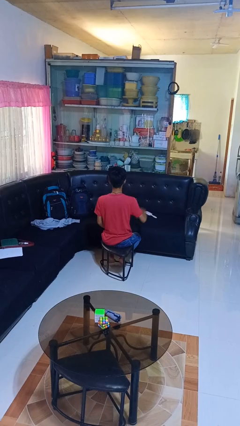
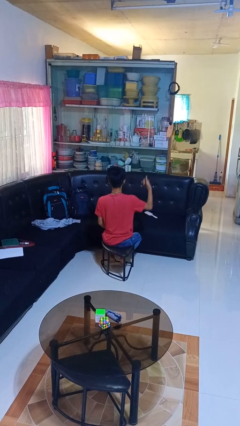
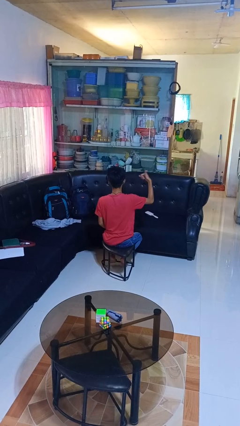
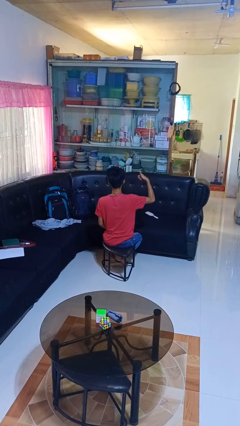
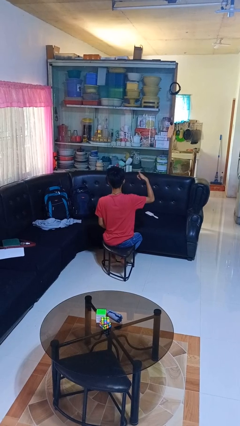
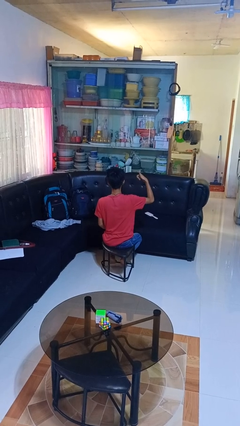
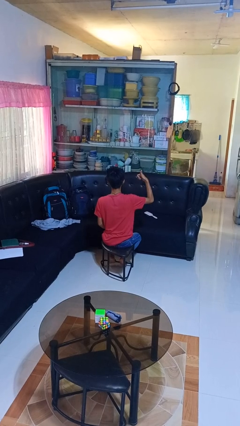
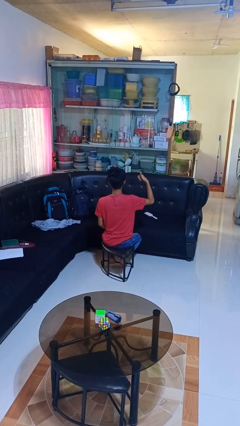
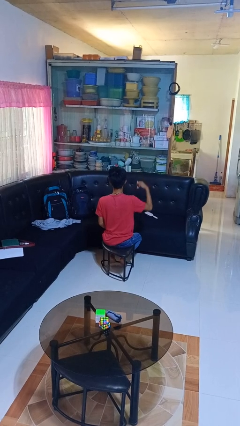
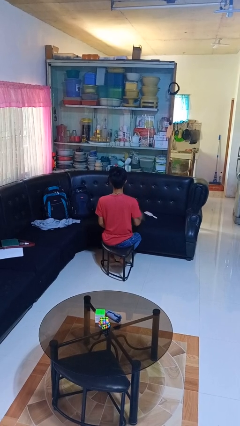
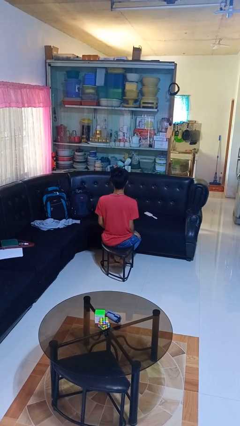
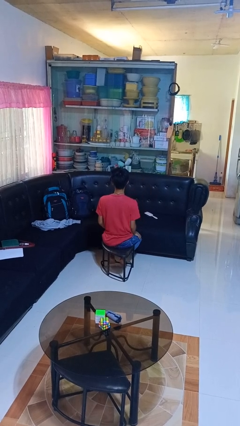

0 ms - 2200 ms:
person gestures hang loose

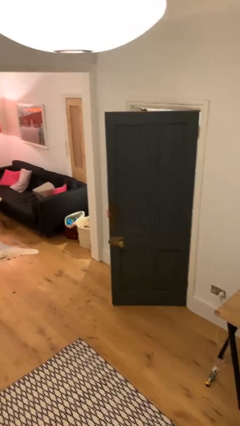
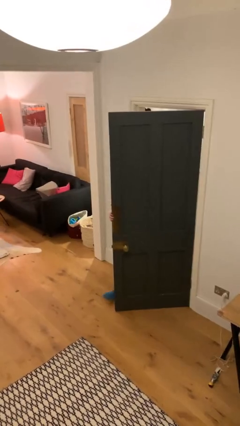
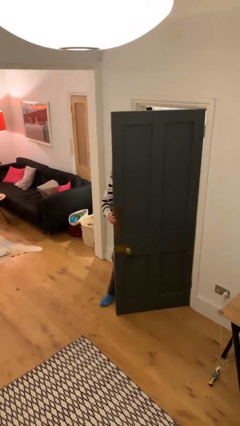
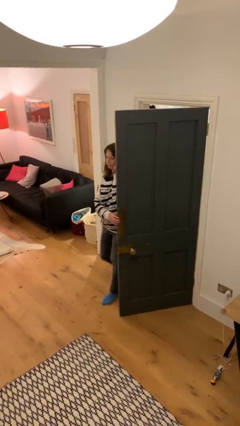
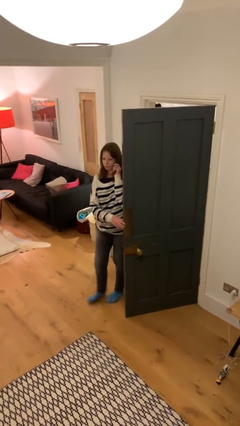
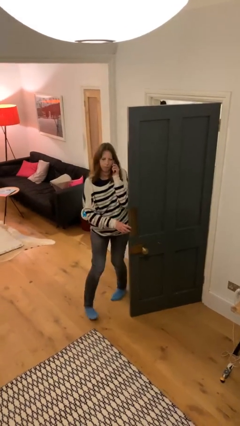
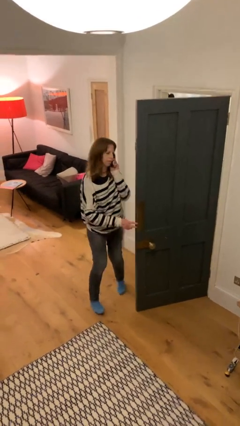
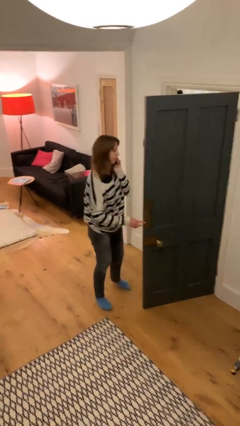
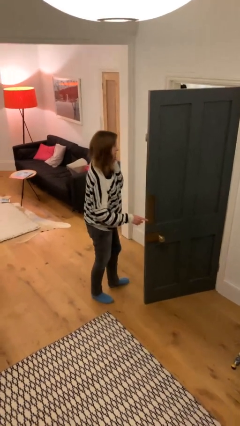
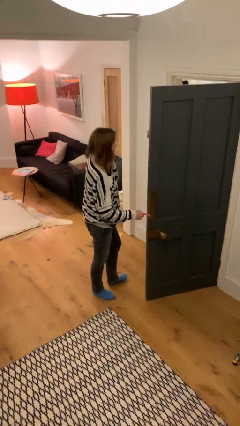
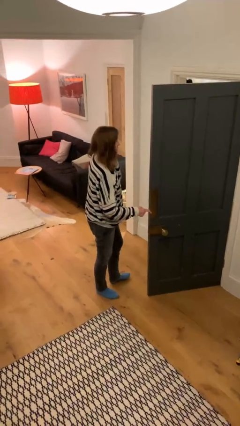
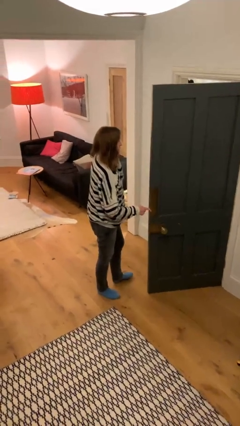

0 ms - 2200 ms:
person enters scene through structure

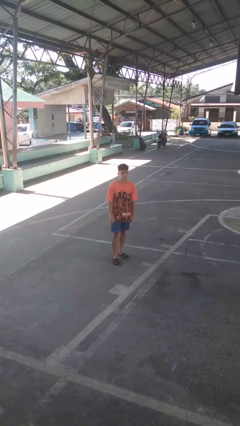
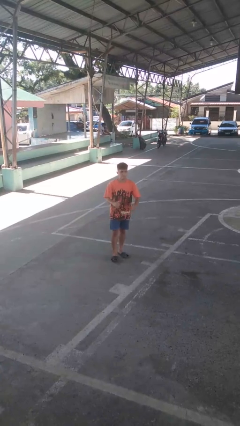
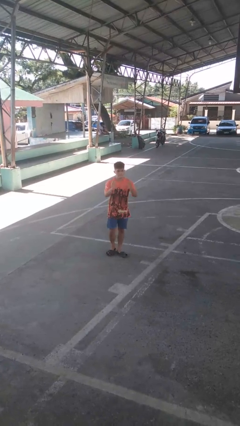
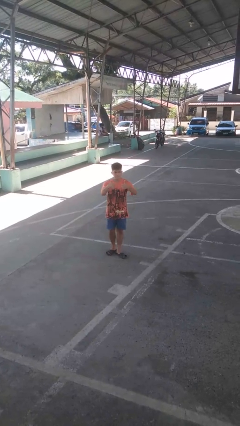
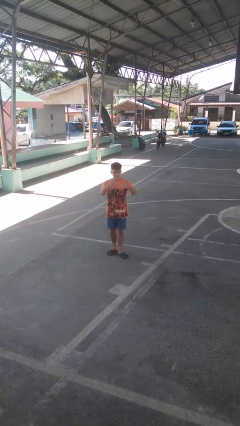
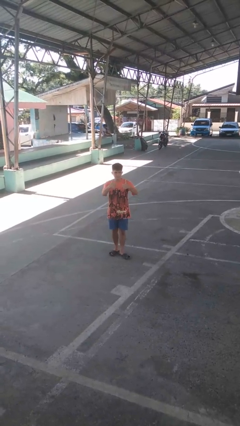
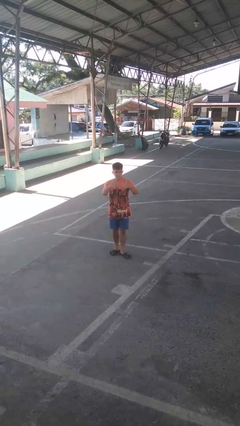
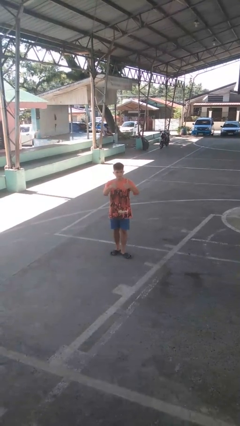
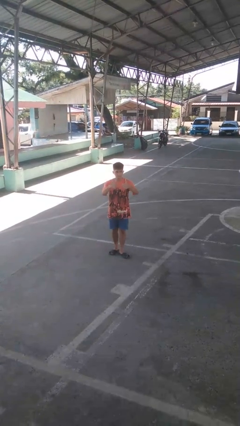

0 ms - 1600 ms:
person gestures thumbs up

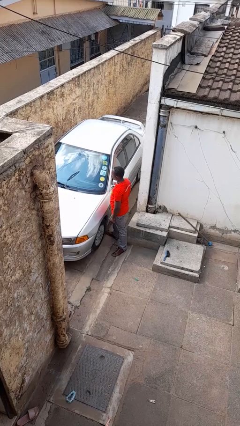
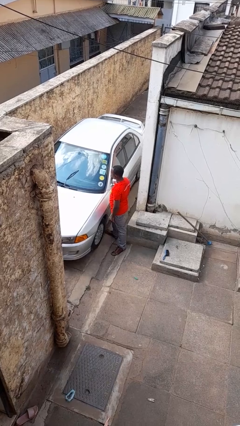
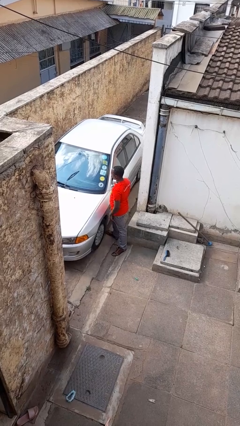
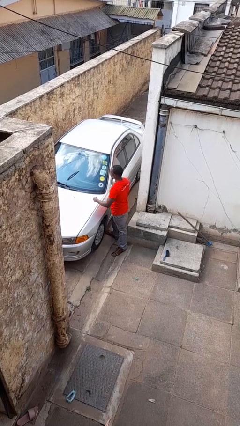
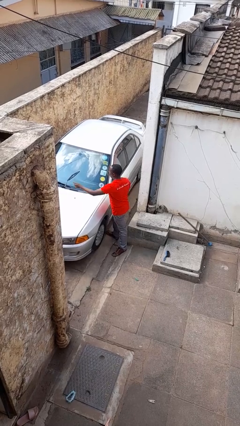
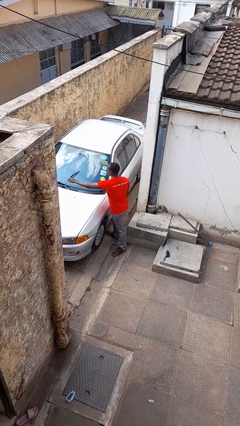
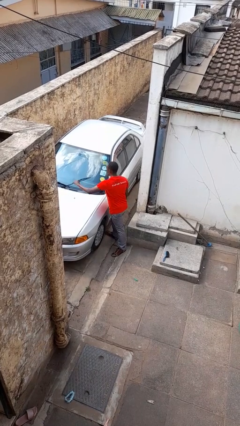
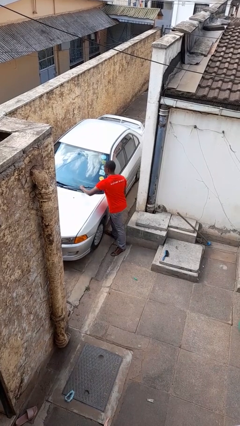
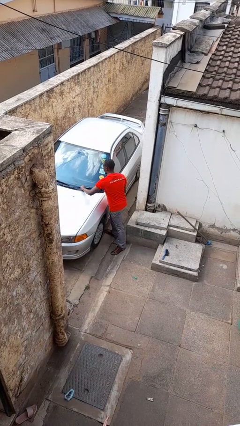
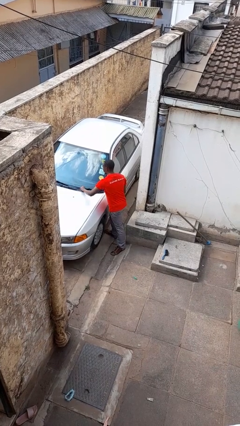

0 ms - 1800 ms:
person flips down car wipers

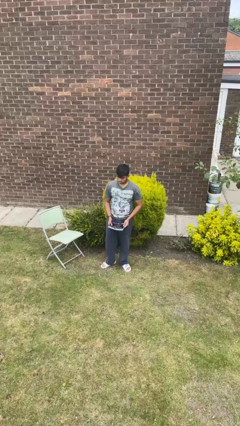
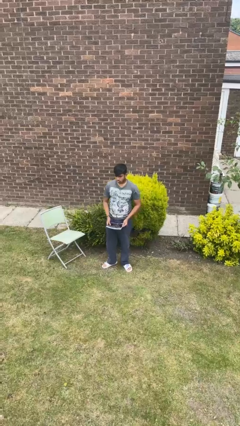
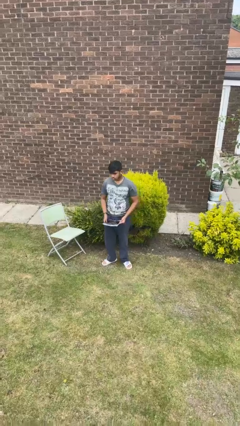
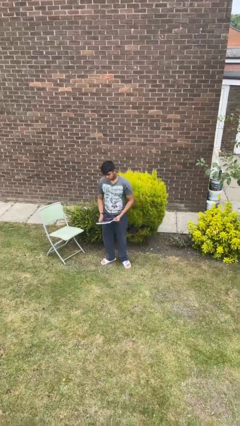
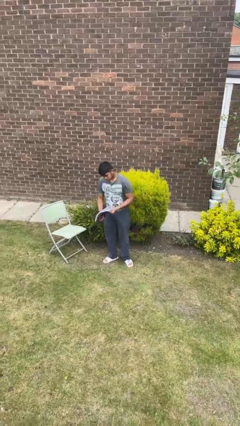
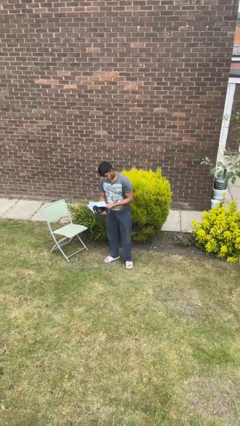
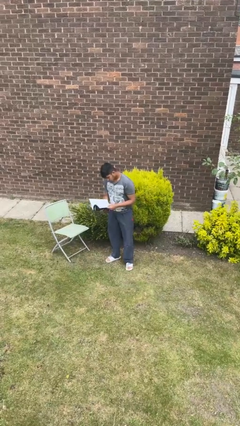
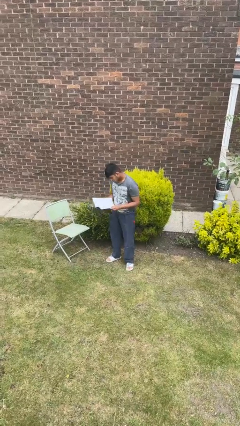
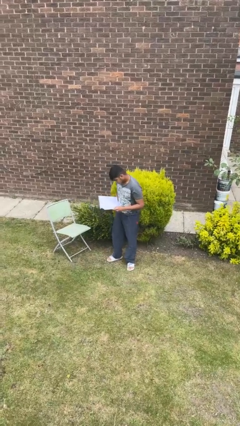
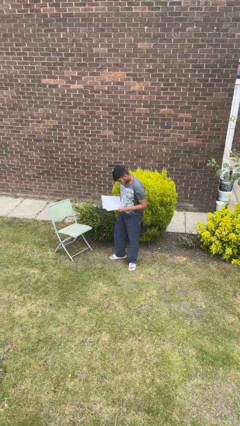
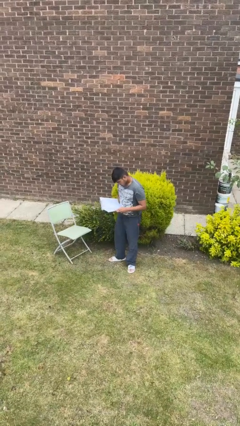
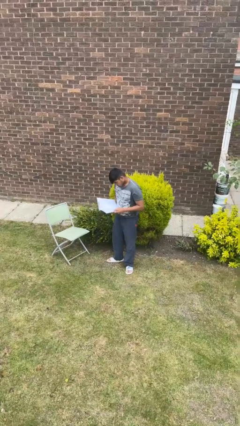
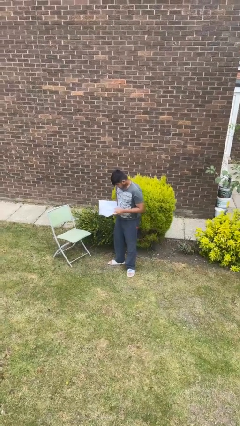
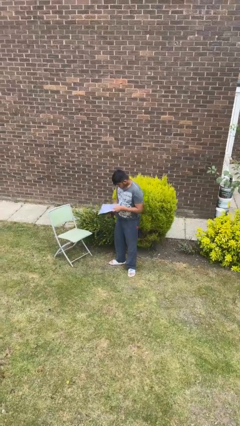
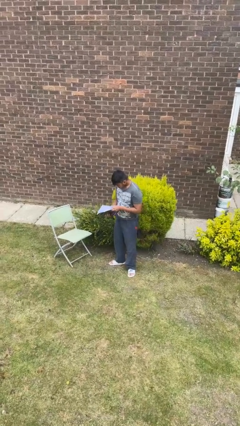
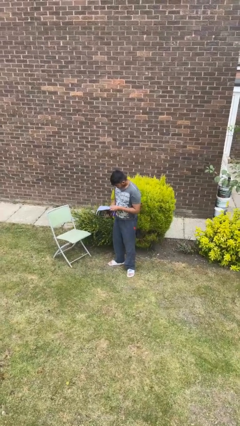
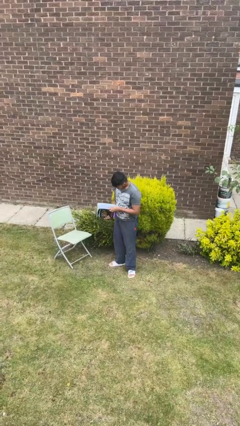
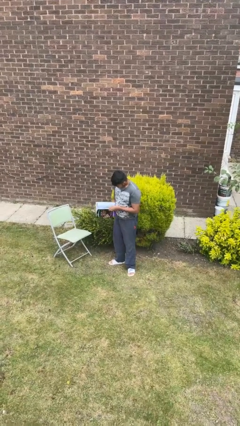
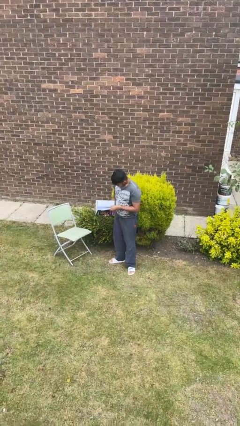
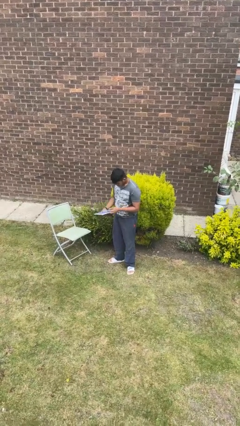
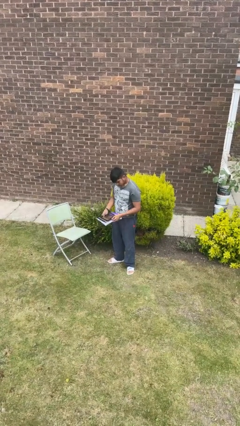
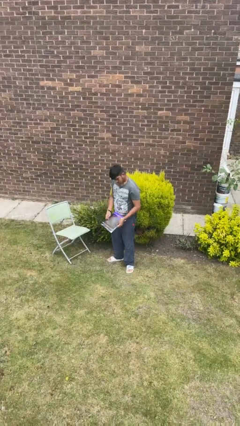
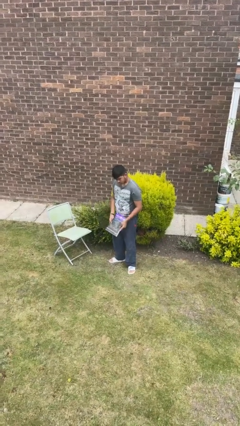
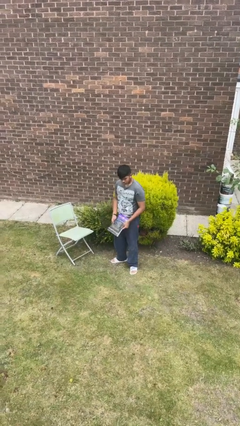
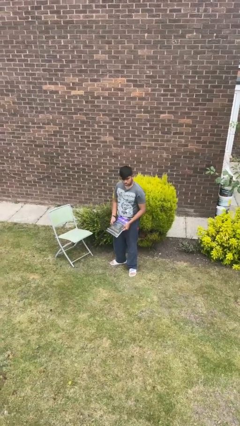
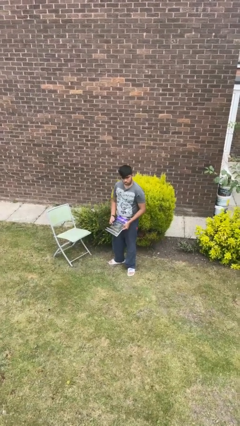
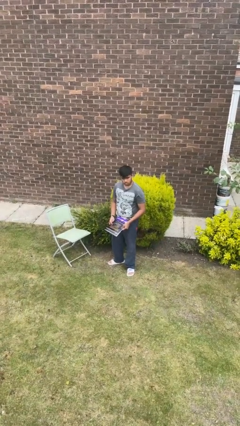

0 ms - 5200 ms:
person reads book

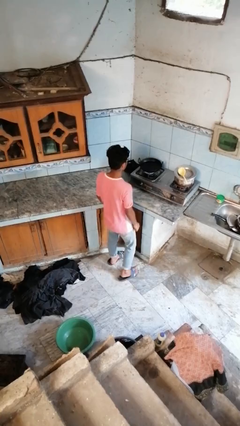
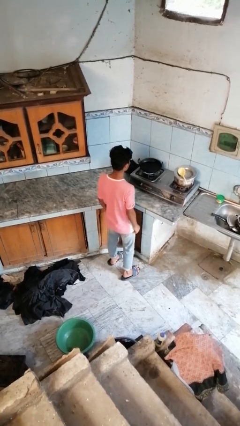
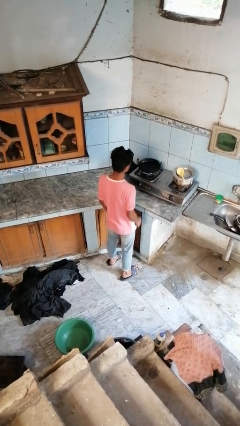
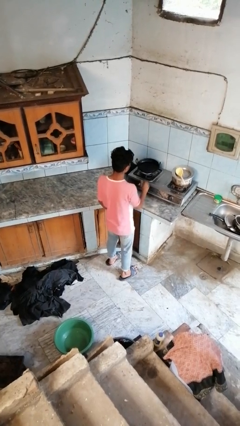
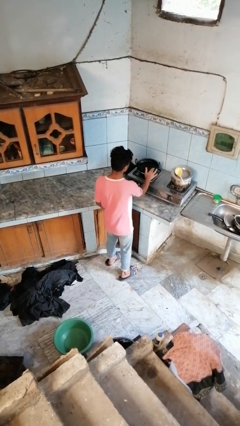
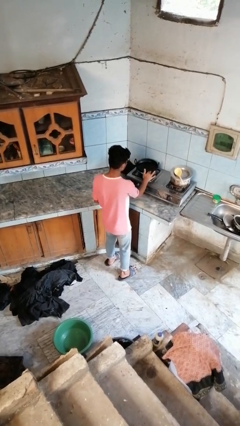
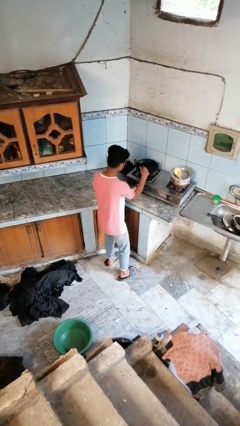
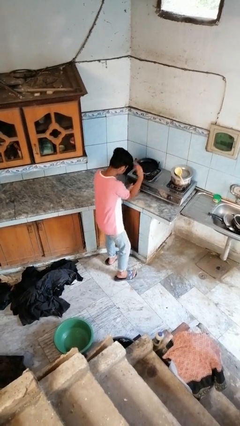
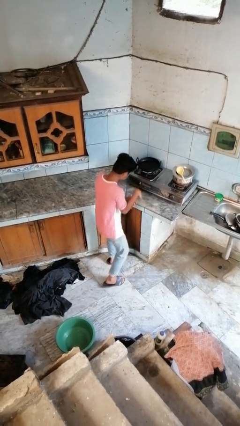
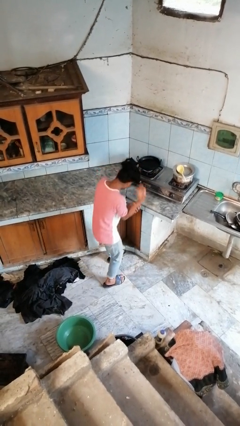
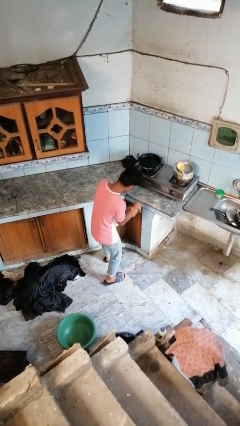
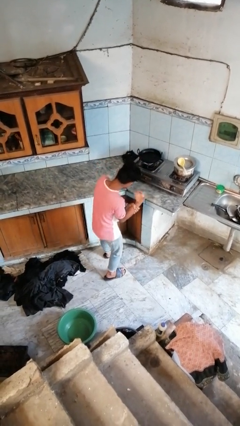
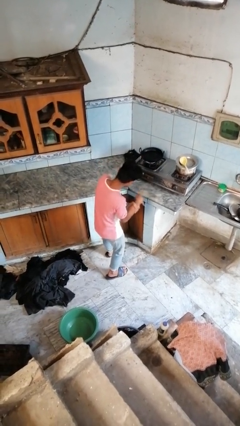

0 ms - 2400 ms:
person burns hand

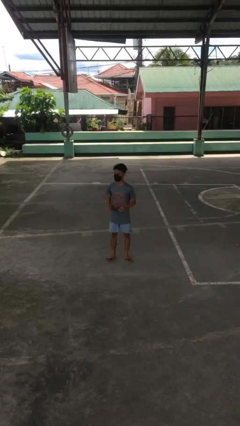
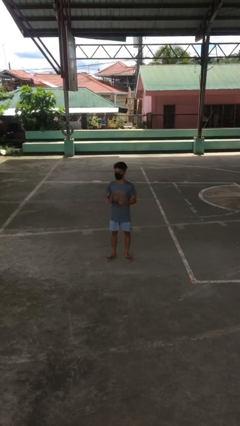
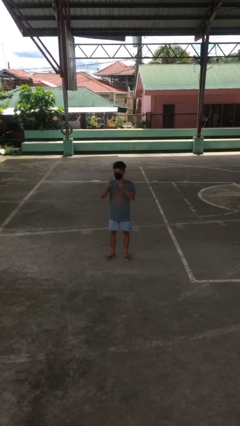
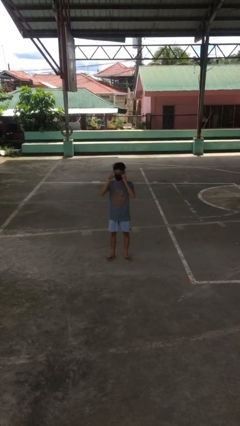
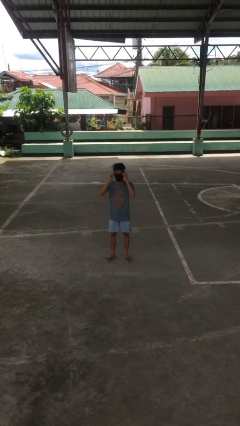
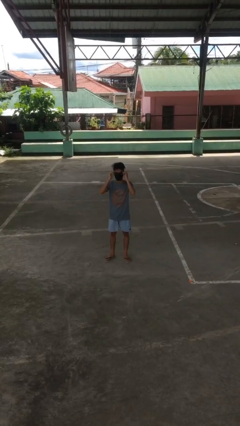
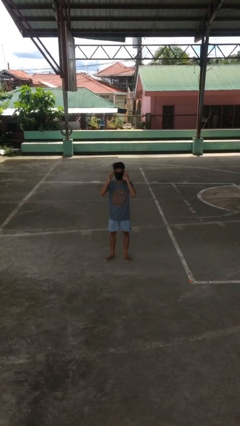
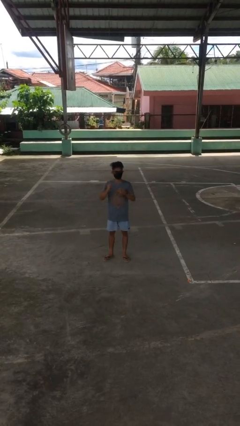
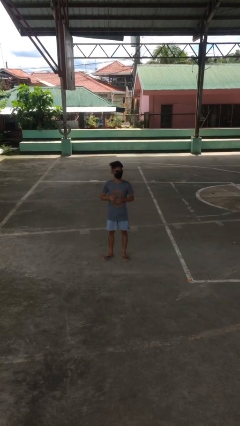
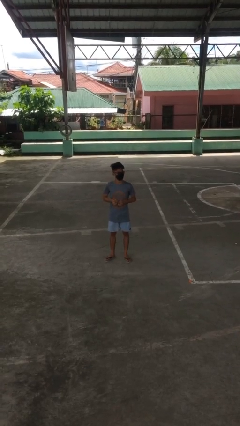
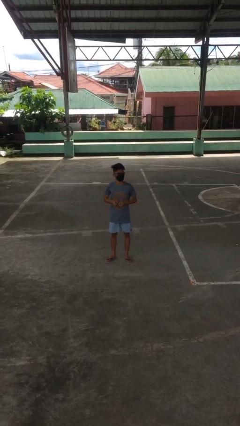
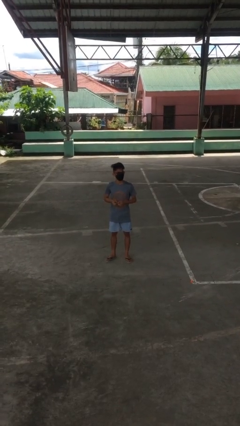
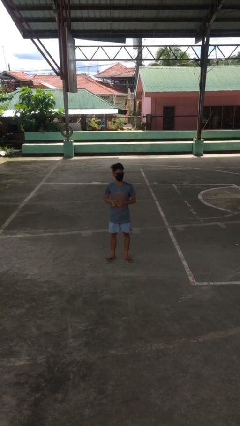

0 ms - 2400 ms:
person puts on glasses
